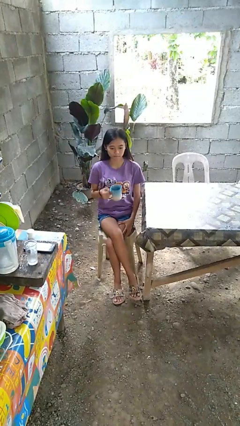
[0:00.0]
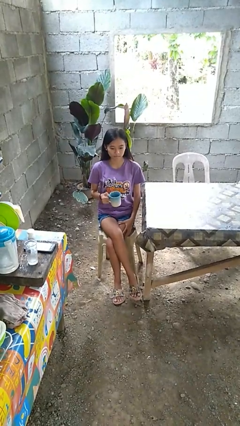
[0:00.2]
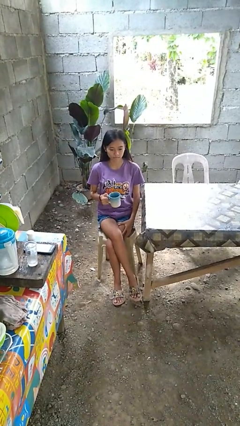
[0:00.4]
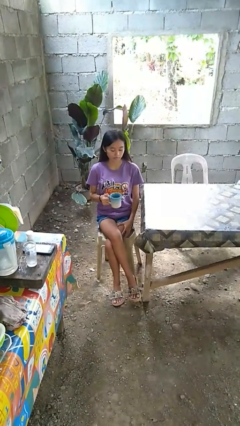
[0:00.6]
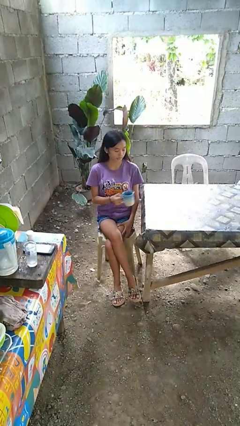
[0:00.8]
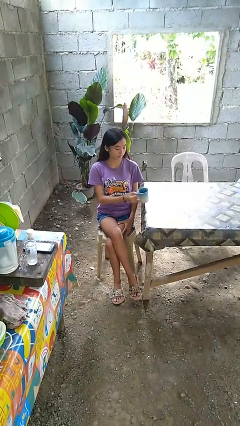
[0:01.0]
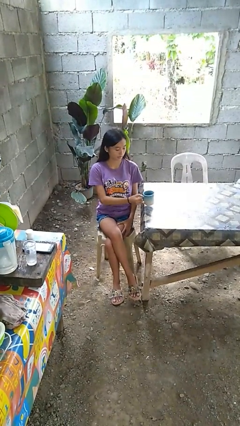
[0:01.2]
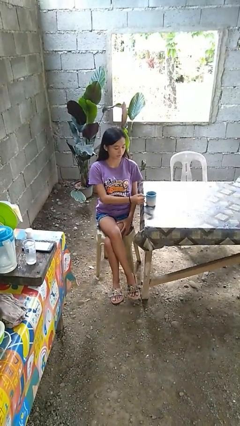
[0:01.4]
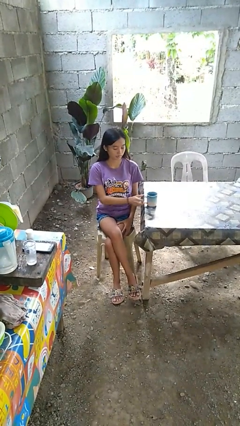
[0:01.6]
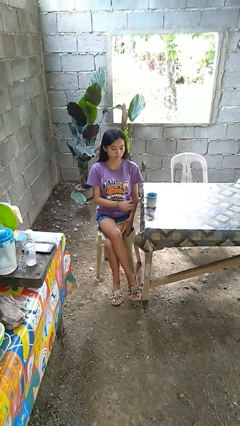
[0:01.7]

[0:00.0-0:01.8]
person puts down object on table

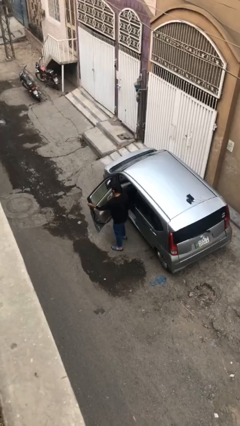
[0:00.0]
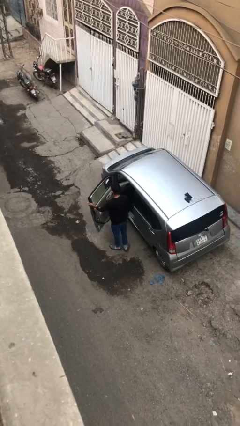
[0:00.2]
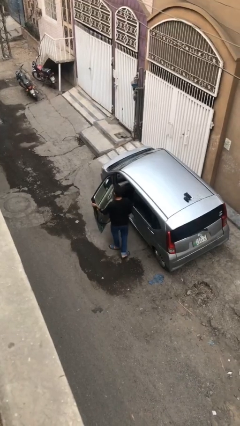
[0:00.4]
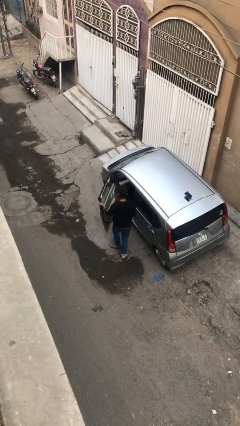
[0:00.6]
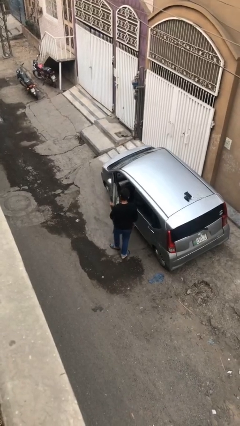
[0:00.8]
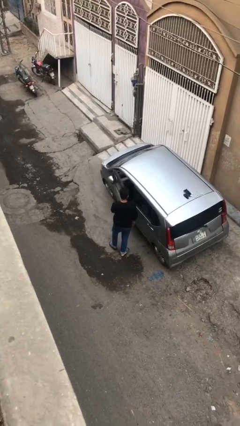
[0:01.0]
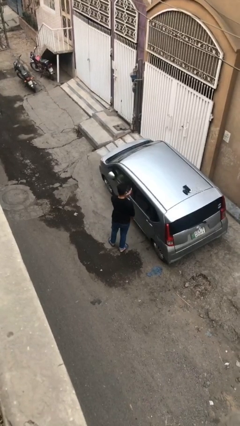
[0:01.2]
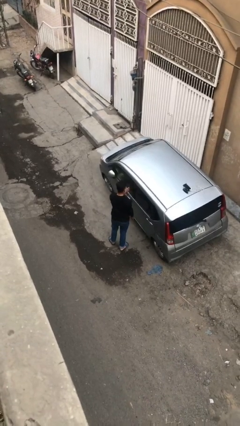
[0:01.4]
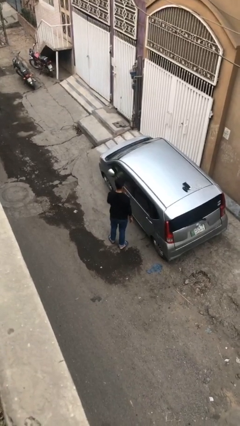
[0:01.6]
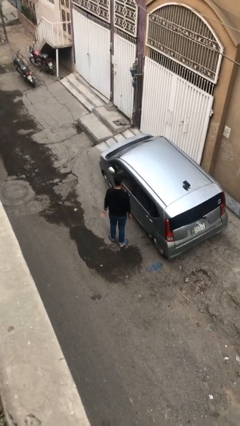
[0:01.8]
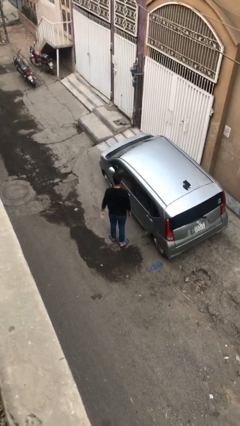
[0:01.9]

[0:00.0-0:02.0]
person closes car door

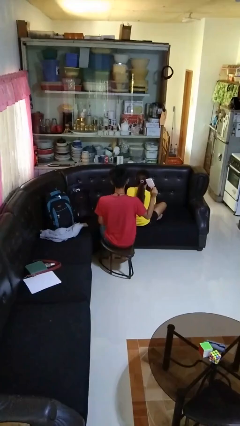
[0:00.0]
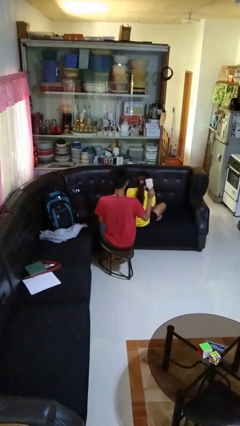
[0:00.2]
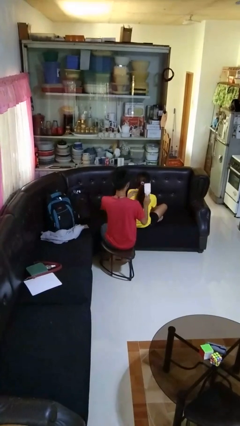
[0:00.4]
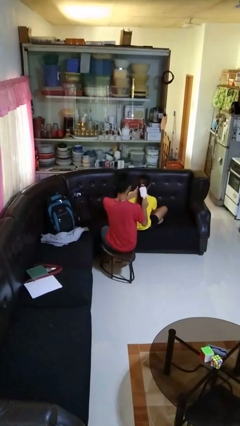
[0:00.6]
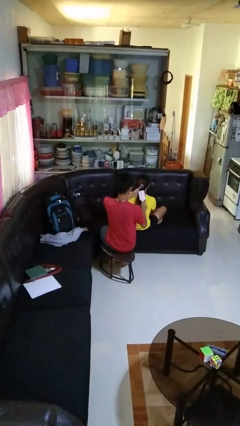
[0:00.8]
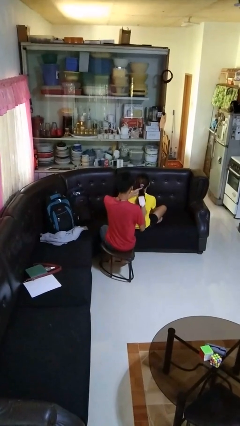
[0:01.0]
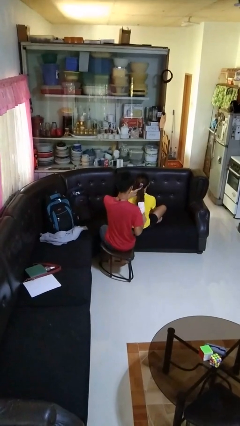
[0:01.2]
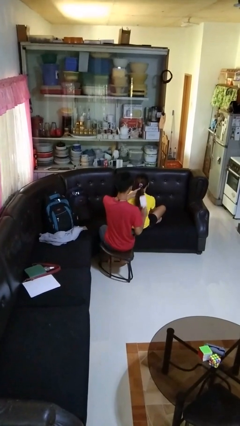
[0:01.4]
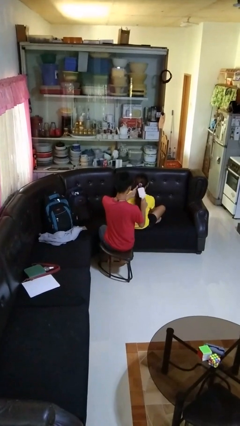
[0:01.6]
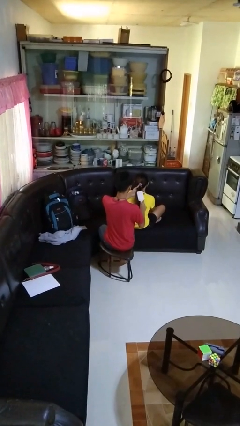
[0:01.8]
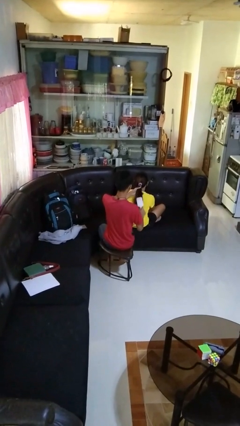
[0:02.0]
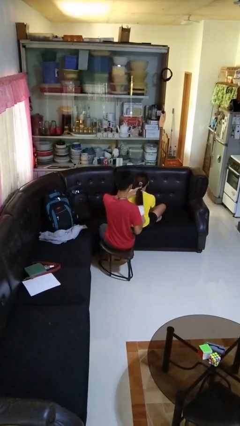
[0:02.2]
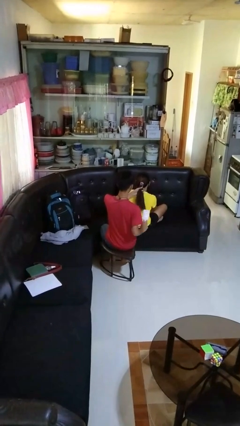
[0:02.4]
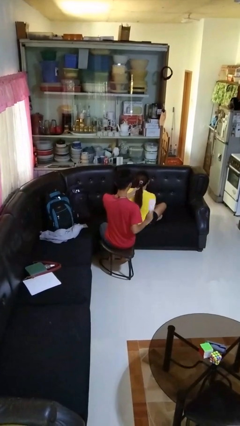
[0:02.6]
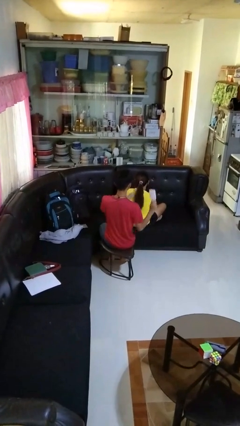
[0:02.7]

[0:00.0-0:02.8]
person brushes hair of person

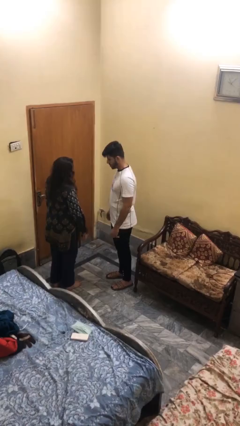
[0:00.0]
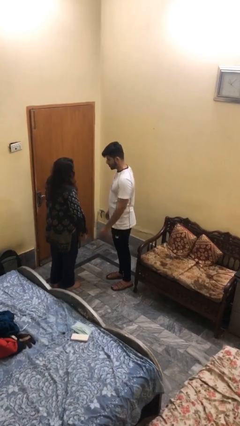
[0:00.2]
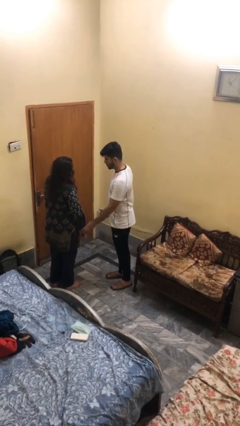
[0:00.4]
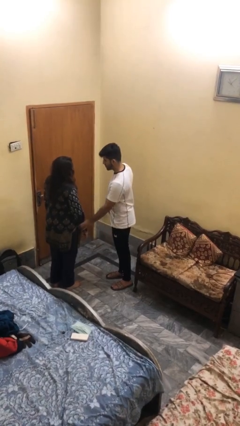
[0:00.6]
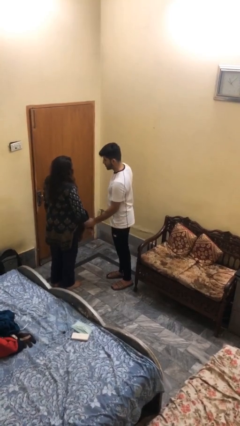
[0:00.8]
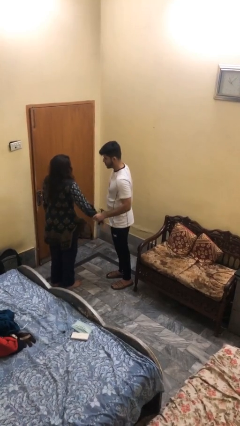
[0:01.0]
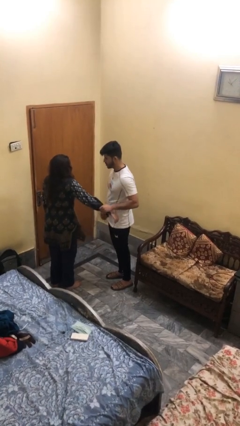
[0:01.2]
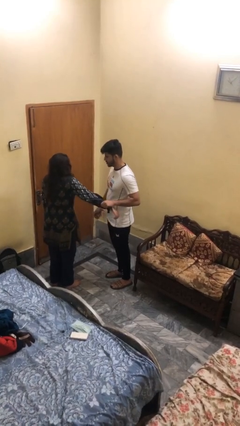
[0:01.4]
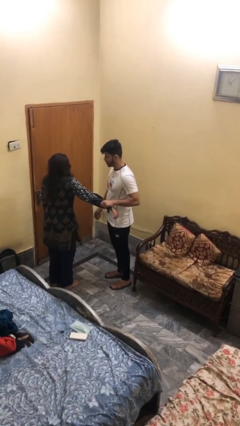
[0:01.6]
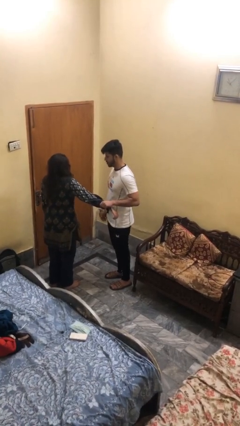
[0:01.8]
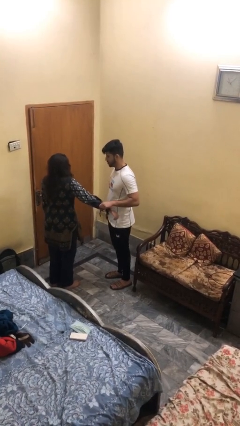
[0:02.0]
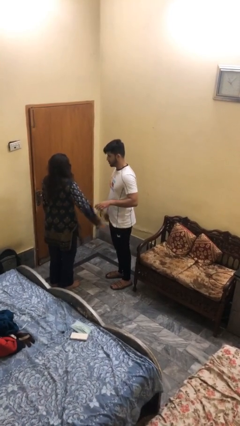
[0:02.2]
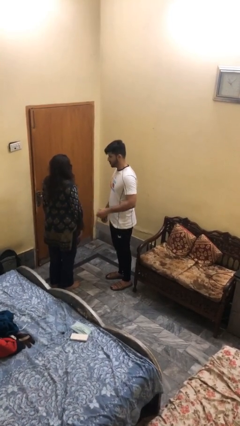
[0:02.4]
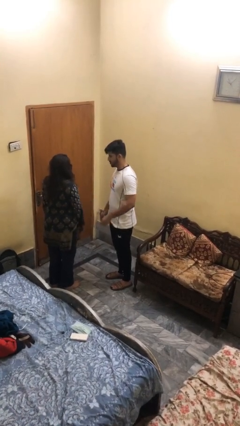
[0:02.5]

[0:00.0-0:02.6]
person grabs person by forearm

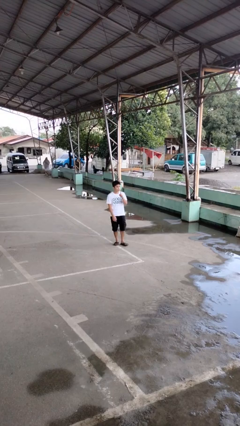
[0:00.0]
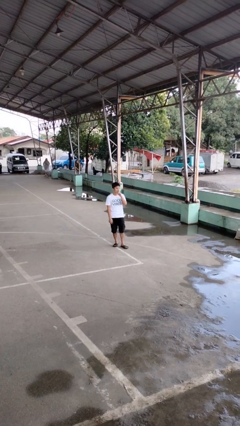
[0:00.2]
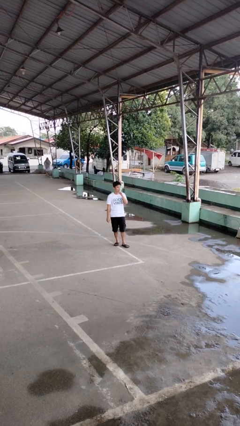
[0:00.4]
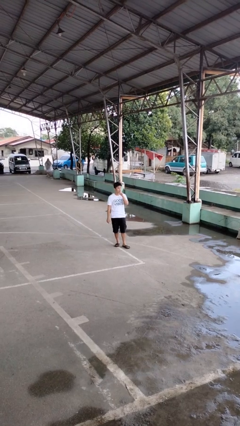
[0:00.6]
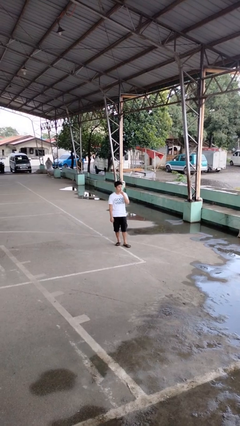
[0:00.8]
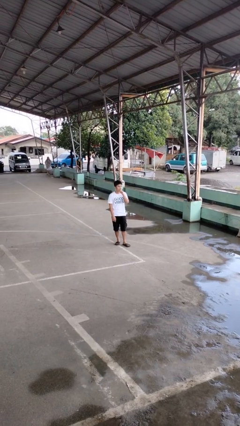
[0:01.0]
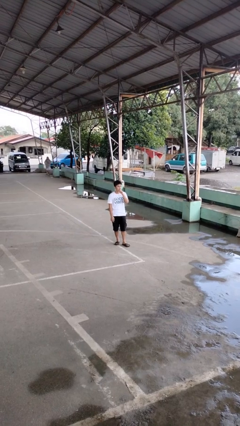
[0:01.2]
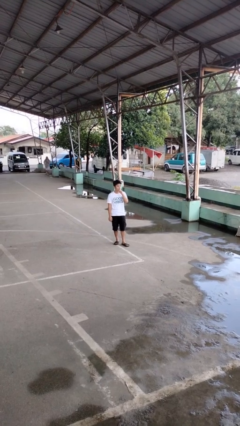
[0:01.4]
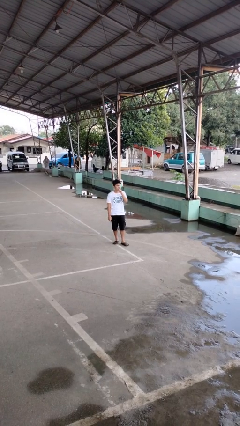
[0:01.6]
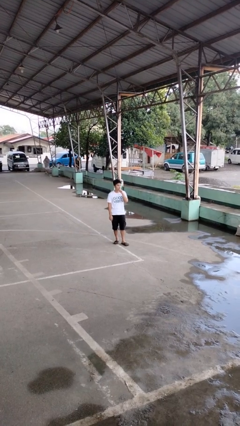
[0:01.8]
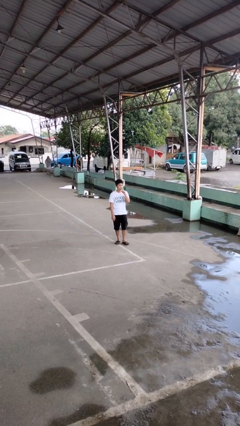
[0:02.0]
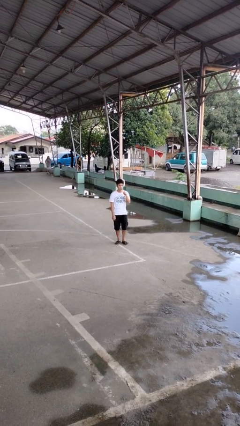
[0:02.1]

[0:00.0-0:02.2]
person gestures be quiet

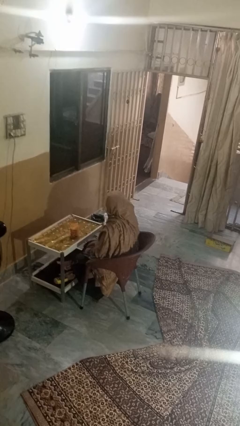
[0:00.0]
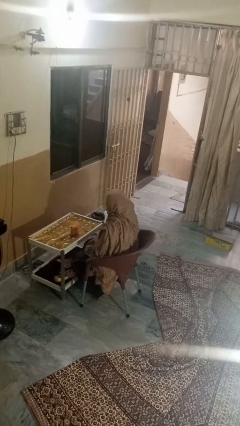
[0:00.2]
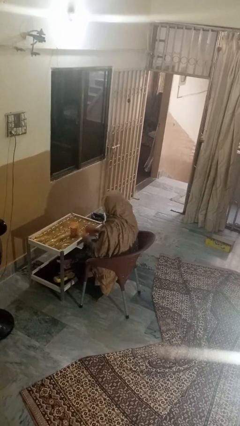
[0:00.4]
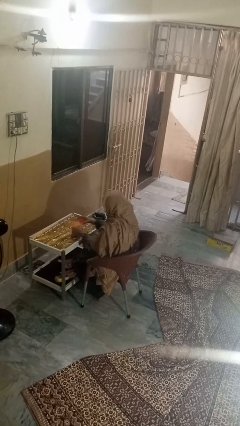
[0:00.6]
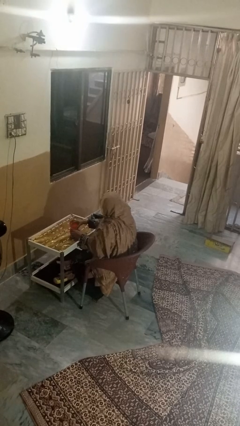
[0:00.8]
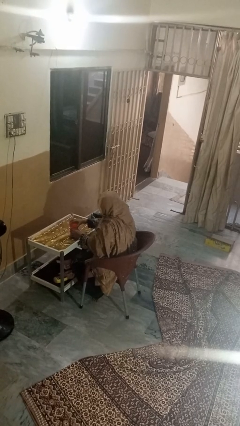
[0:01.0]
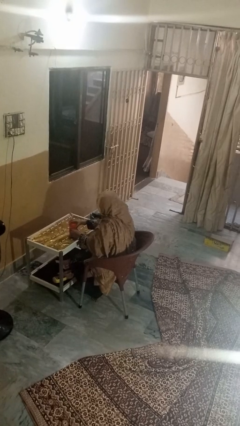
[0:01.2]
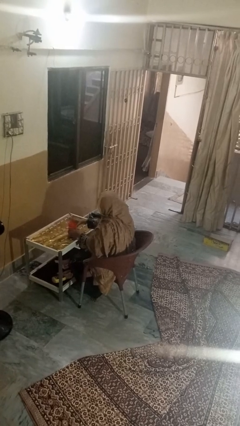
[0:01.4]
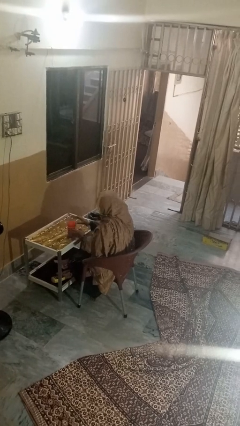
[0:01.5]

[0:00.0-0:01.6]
person closes jar

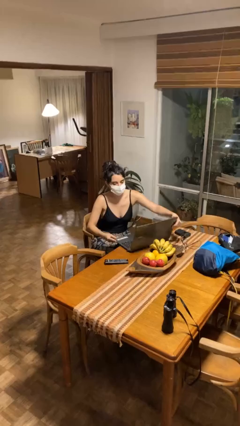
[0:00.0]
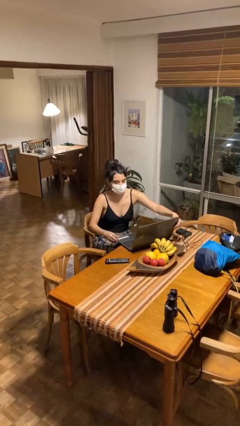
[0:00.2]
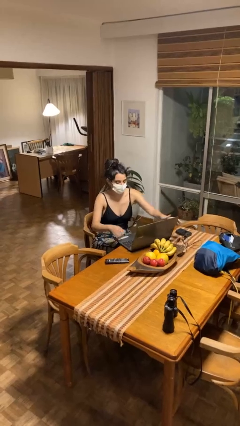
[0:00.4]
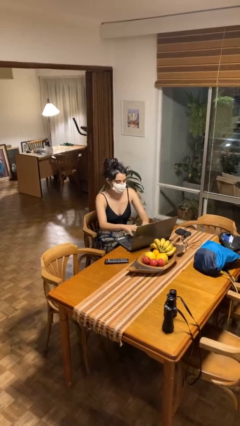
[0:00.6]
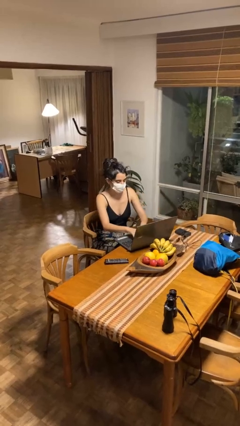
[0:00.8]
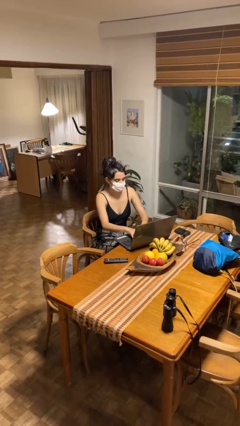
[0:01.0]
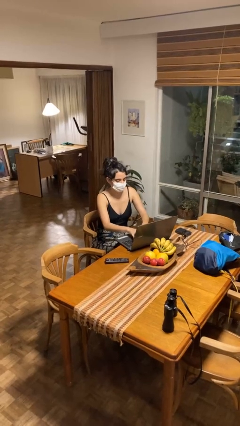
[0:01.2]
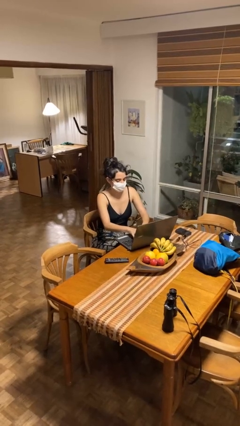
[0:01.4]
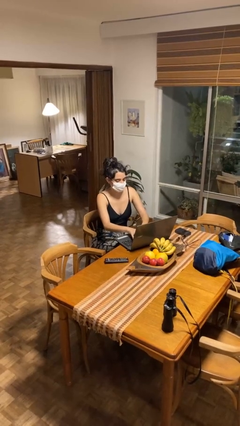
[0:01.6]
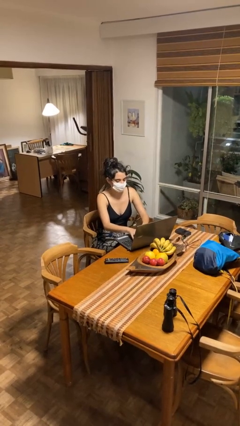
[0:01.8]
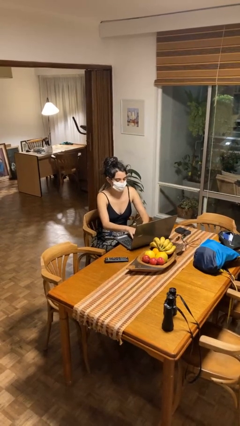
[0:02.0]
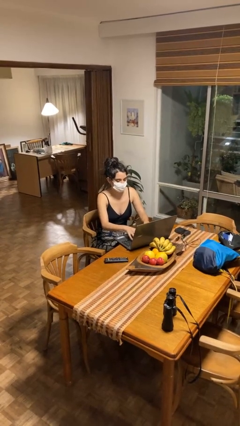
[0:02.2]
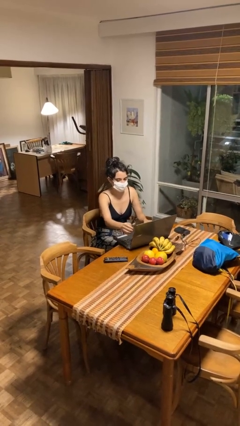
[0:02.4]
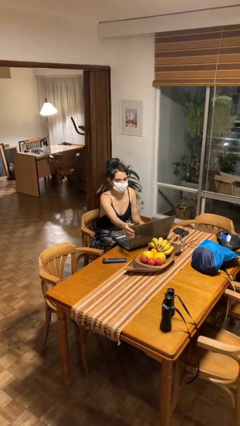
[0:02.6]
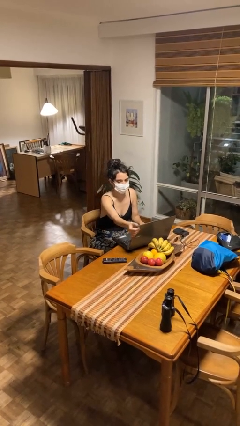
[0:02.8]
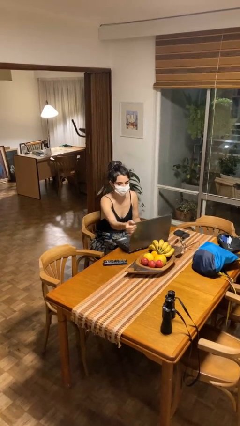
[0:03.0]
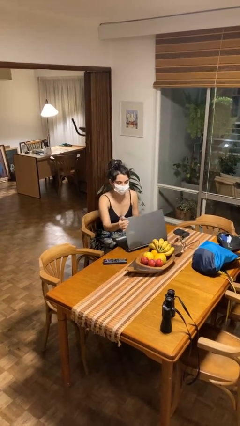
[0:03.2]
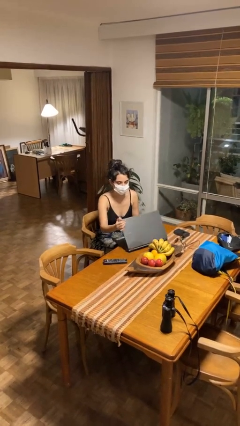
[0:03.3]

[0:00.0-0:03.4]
person interacts with laptop

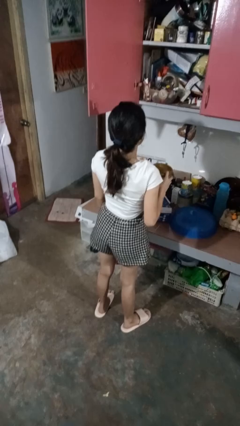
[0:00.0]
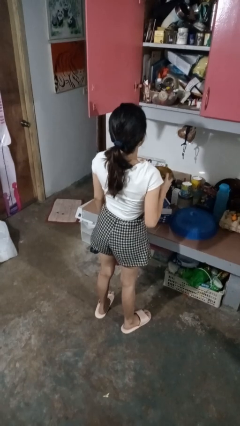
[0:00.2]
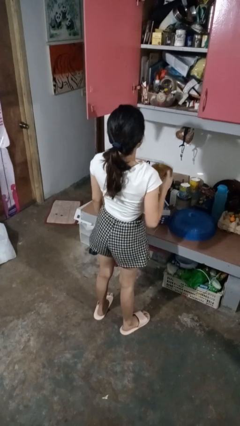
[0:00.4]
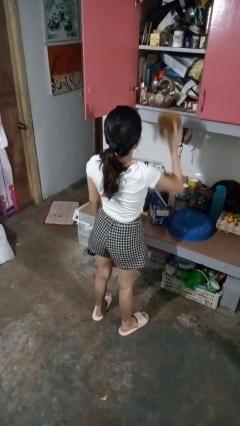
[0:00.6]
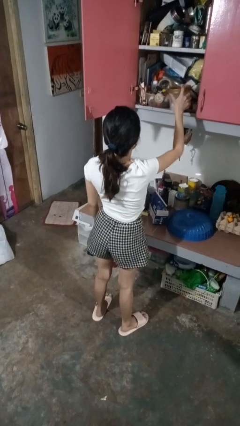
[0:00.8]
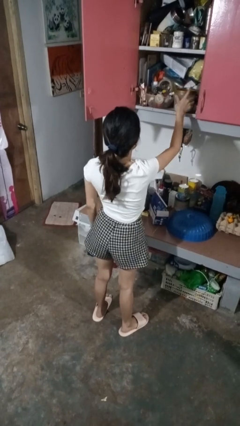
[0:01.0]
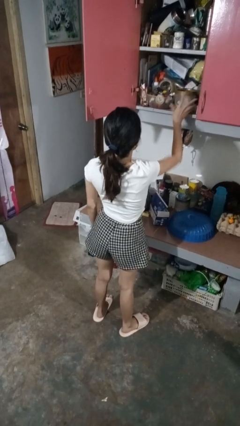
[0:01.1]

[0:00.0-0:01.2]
person puts down object into cabinet
